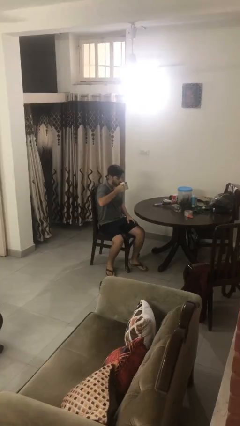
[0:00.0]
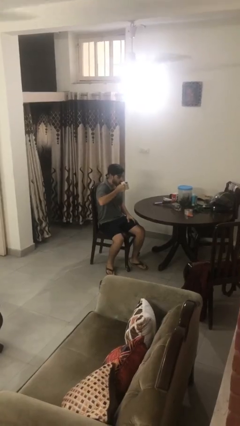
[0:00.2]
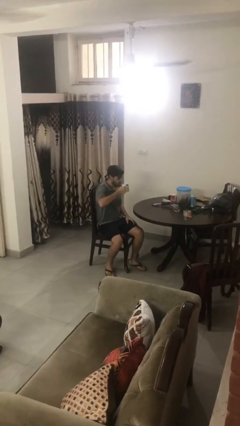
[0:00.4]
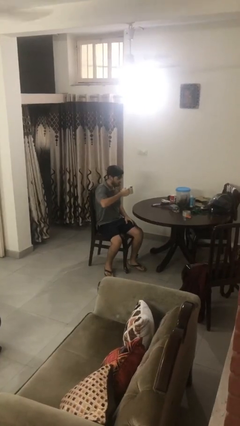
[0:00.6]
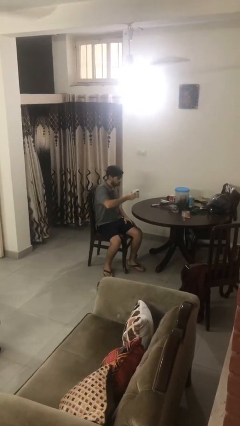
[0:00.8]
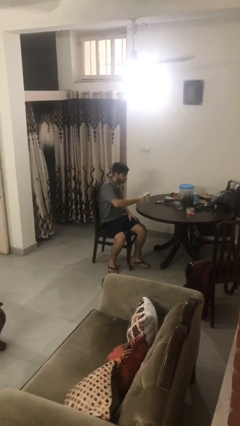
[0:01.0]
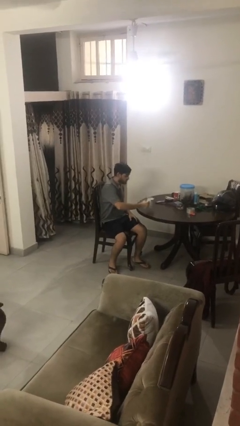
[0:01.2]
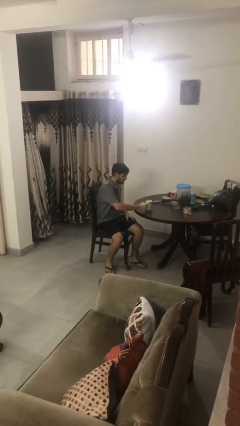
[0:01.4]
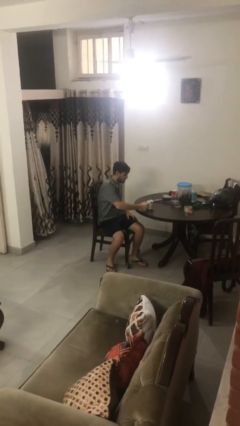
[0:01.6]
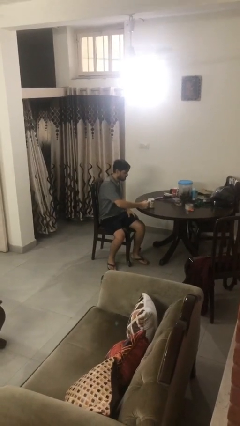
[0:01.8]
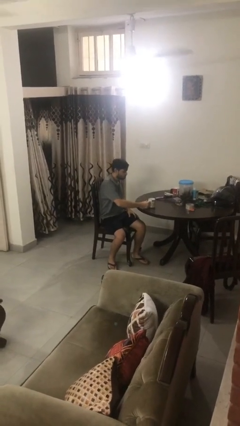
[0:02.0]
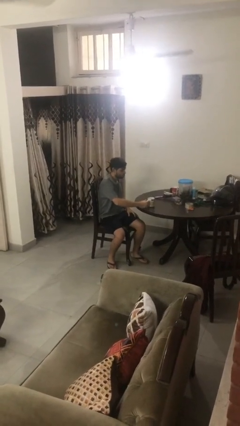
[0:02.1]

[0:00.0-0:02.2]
person puts down object on table

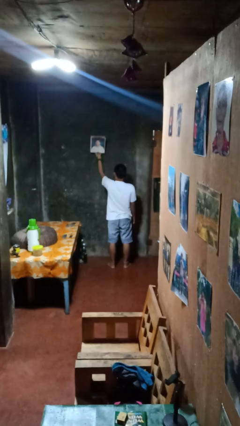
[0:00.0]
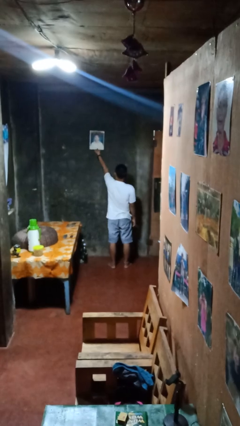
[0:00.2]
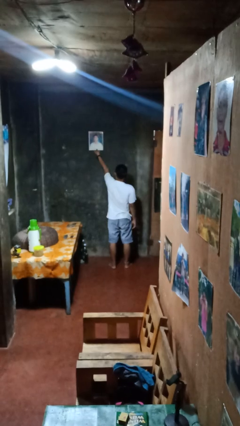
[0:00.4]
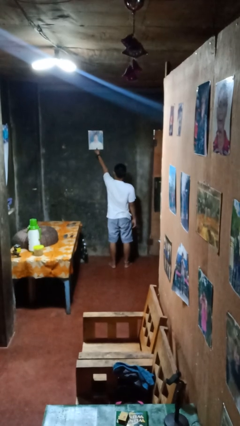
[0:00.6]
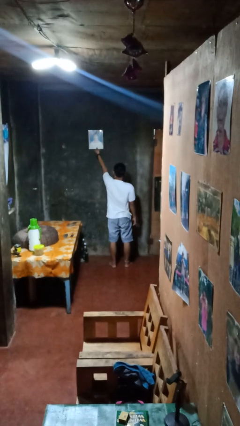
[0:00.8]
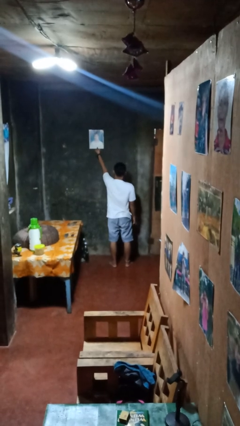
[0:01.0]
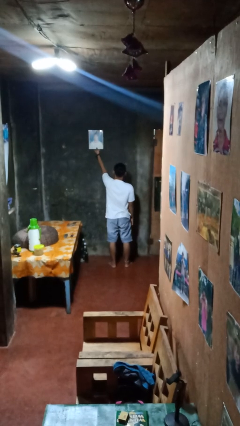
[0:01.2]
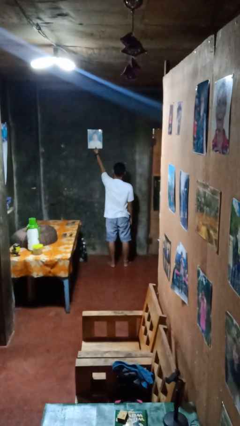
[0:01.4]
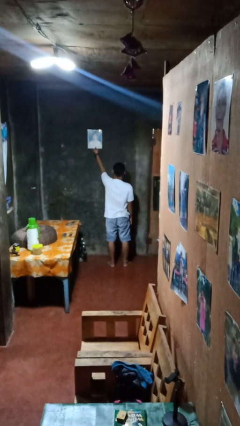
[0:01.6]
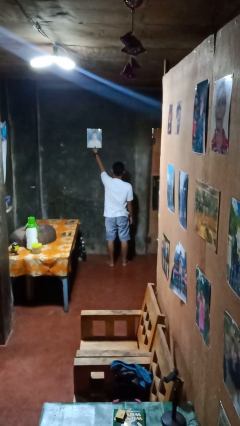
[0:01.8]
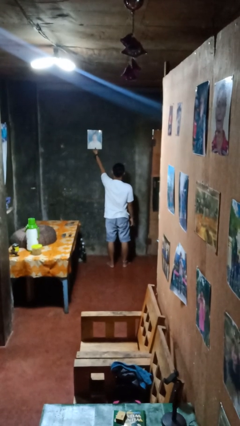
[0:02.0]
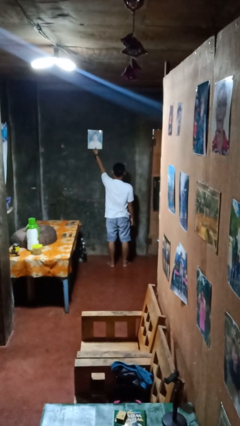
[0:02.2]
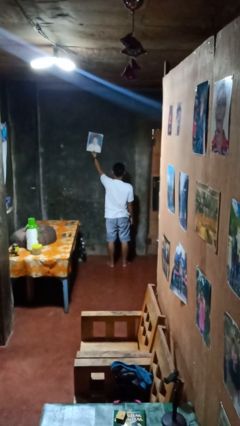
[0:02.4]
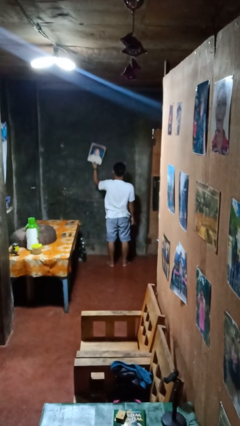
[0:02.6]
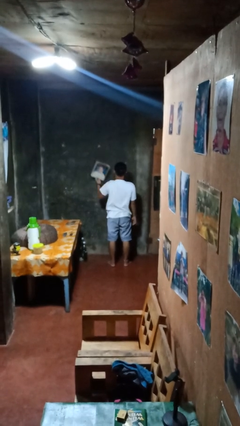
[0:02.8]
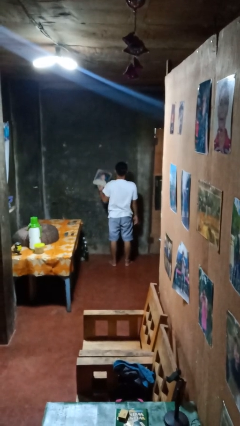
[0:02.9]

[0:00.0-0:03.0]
person puts up picture frame

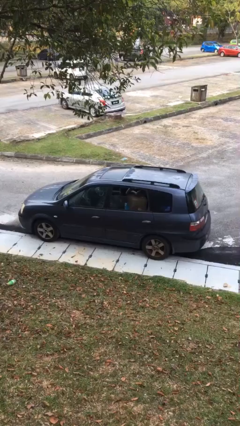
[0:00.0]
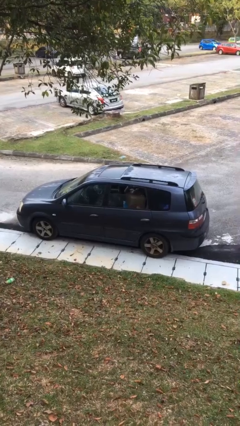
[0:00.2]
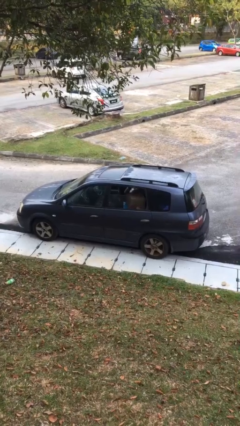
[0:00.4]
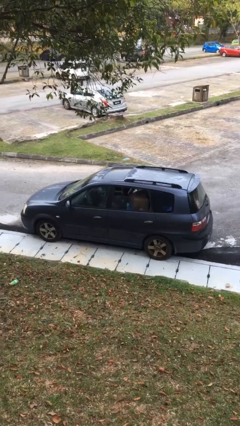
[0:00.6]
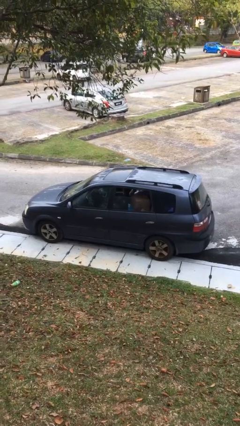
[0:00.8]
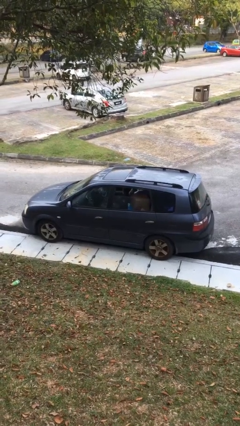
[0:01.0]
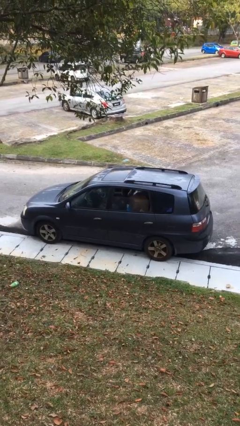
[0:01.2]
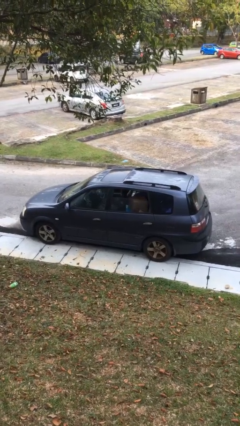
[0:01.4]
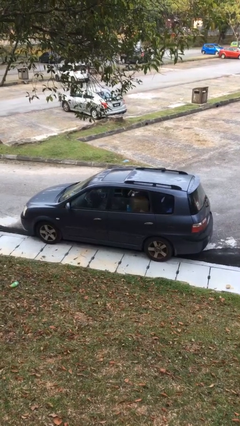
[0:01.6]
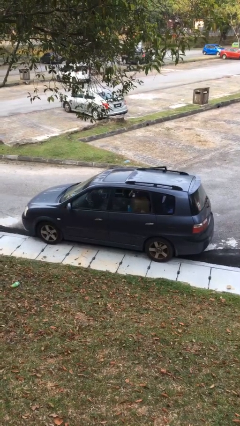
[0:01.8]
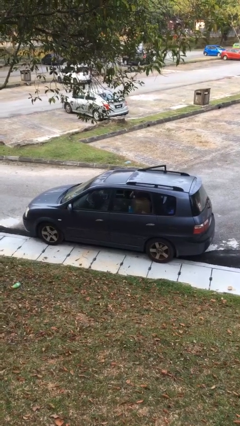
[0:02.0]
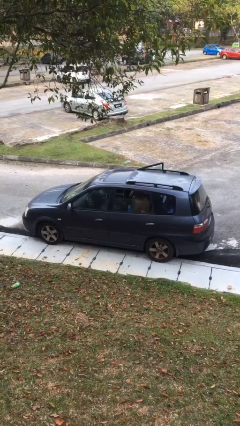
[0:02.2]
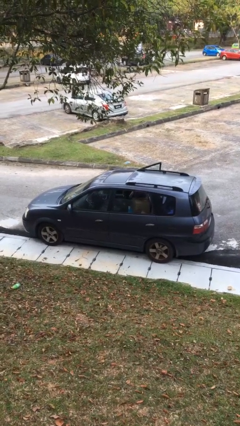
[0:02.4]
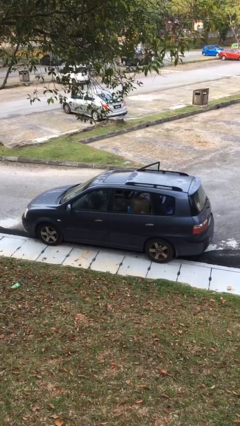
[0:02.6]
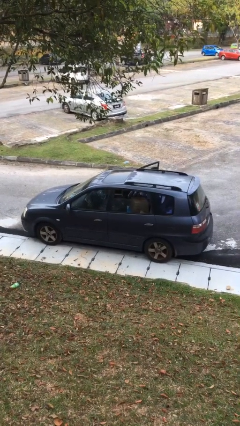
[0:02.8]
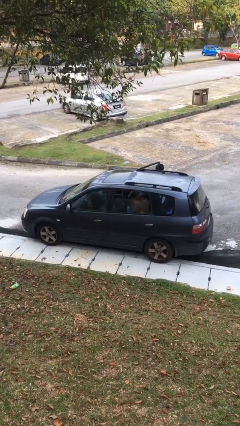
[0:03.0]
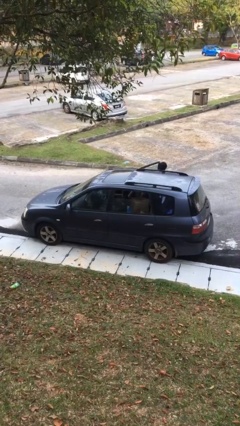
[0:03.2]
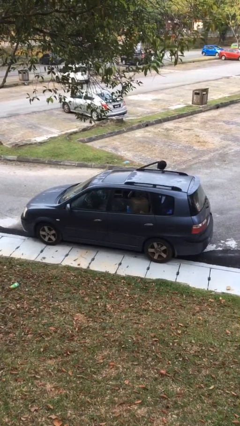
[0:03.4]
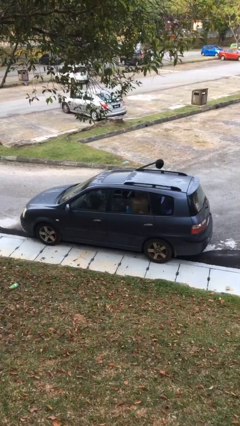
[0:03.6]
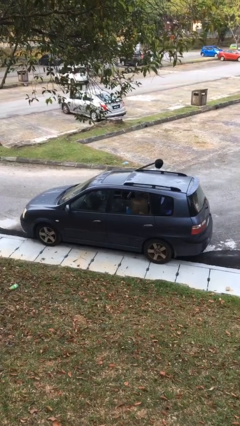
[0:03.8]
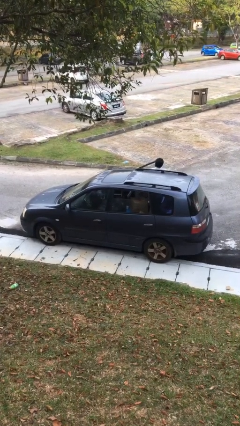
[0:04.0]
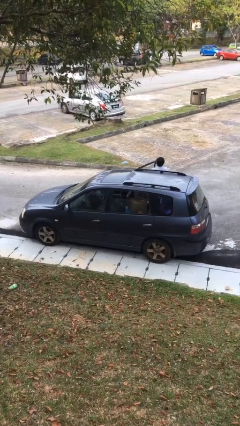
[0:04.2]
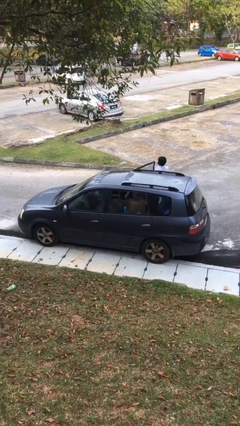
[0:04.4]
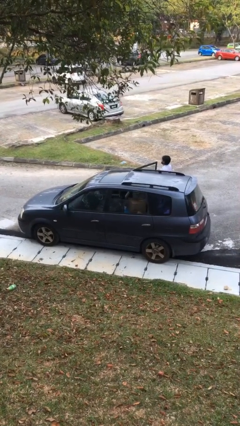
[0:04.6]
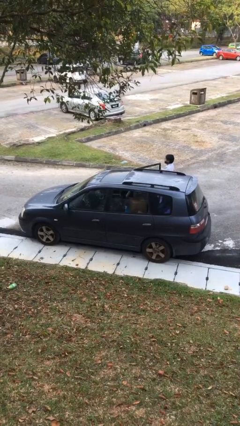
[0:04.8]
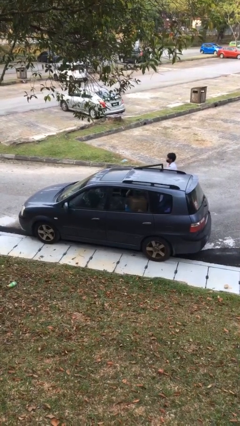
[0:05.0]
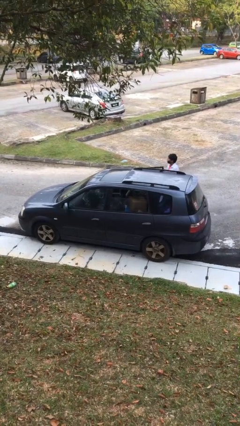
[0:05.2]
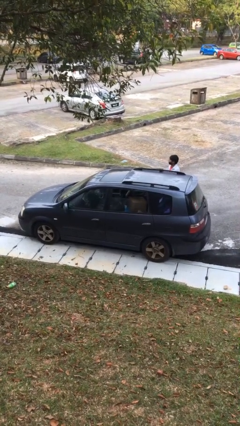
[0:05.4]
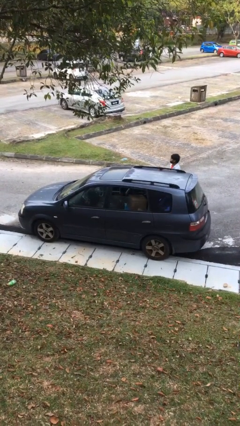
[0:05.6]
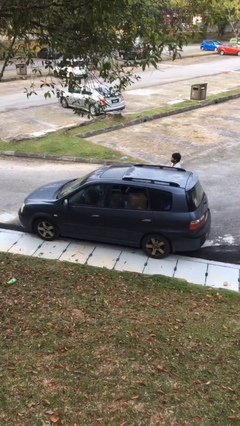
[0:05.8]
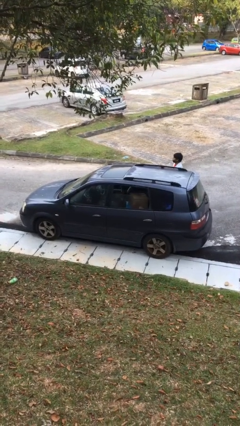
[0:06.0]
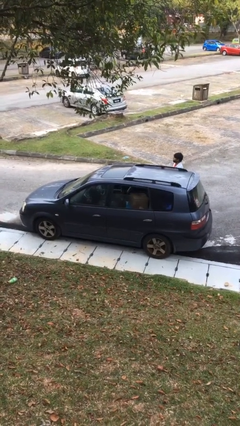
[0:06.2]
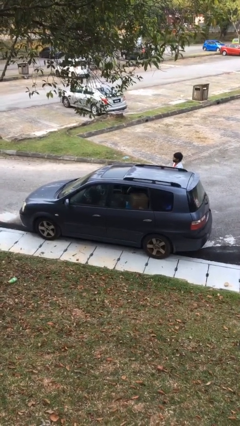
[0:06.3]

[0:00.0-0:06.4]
car drops off person

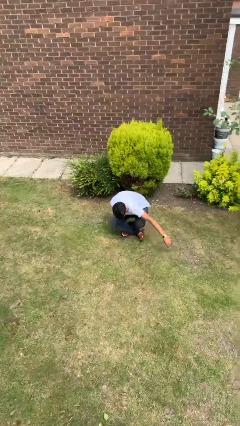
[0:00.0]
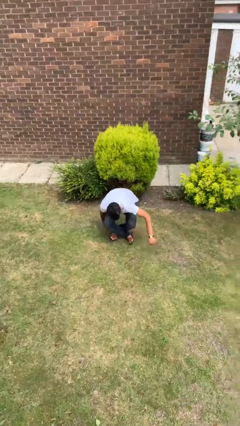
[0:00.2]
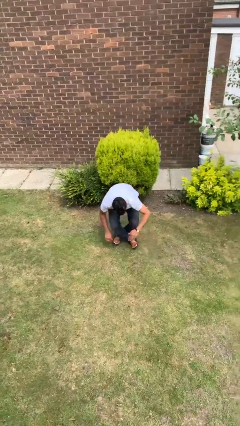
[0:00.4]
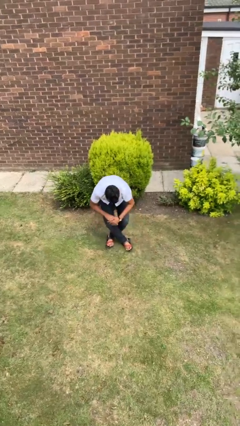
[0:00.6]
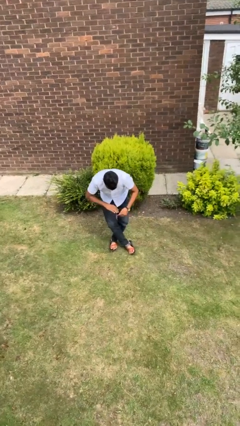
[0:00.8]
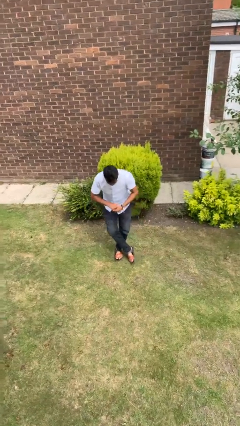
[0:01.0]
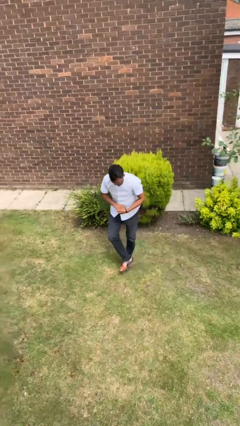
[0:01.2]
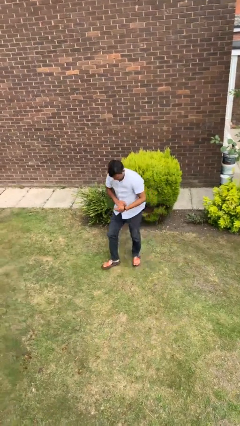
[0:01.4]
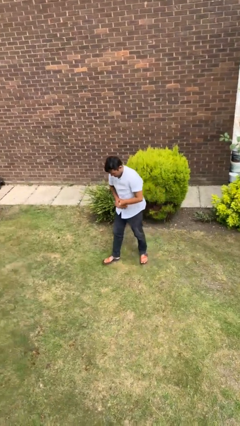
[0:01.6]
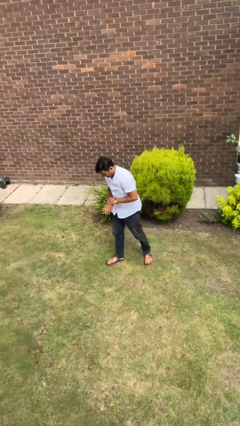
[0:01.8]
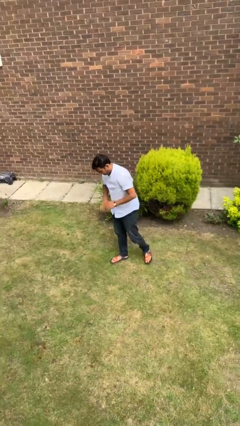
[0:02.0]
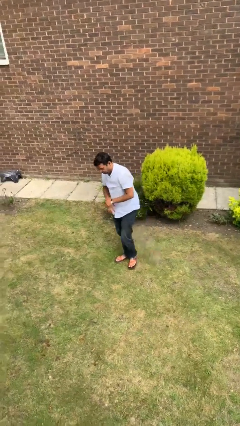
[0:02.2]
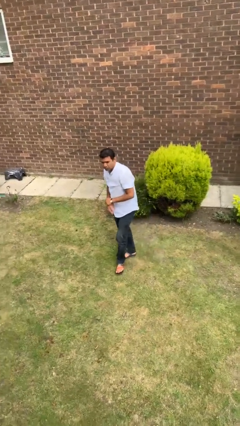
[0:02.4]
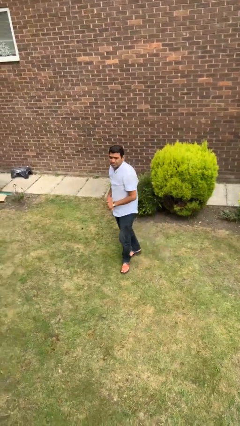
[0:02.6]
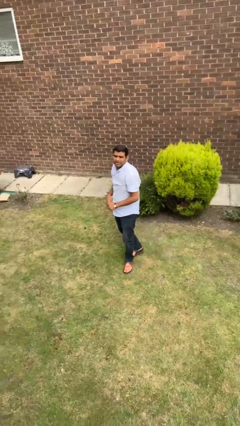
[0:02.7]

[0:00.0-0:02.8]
person stands up from floor

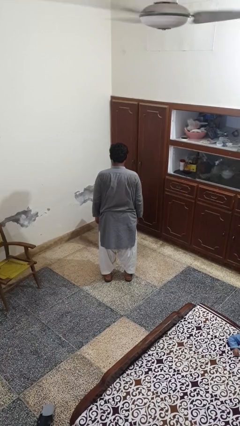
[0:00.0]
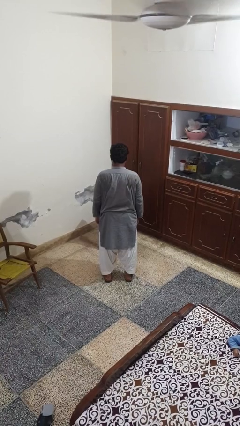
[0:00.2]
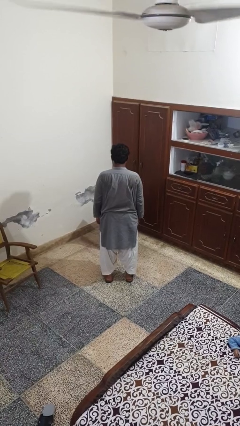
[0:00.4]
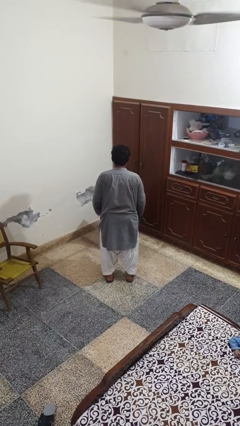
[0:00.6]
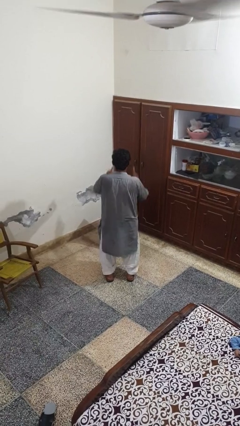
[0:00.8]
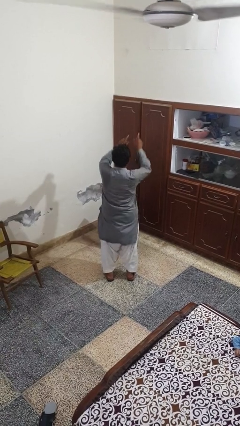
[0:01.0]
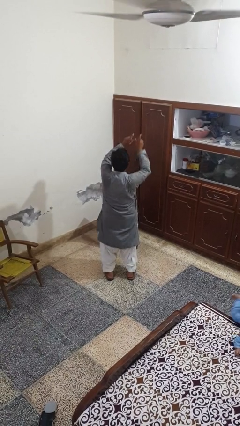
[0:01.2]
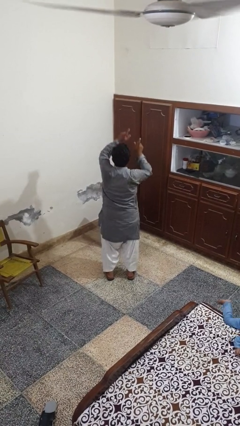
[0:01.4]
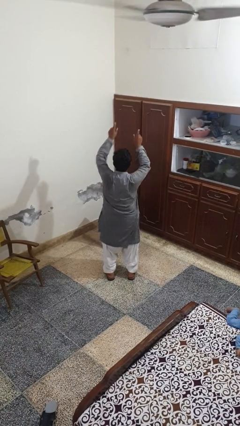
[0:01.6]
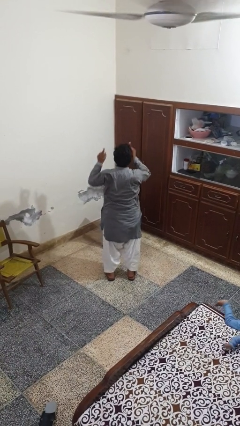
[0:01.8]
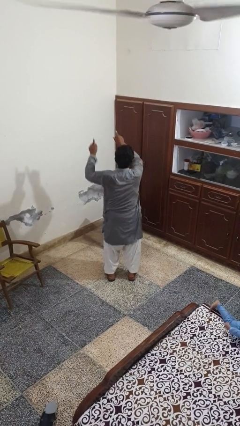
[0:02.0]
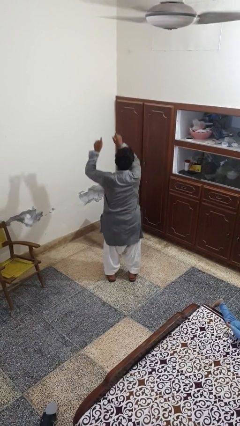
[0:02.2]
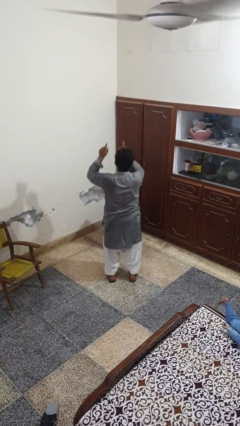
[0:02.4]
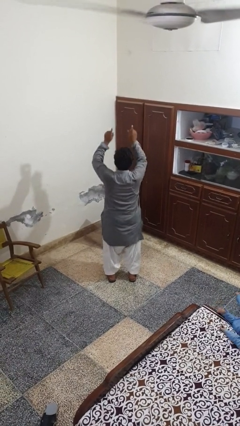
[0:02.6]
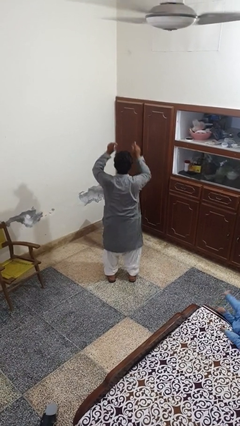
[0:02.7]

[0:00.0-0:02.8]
person dances in place

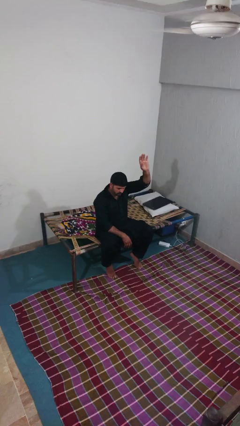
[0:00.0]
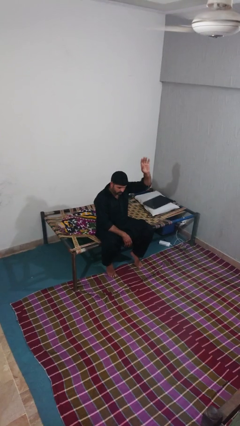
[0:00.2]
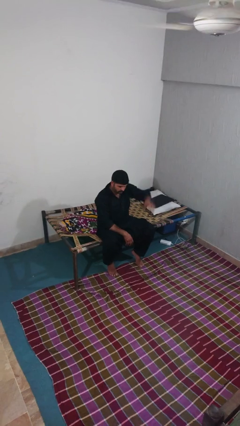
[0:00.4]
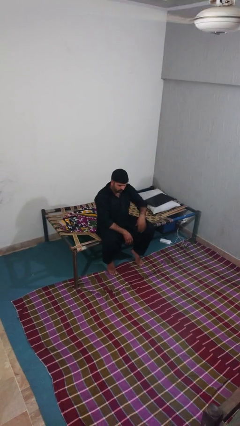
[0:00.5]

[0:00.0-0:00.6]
person gestures lower hand
